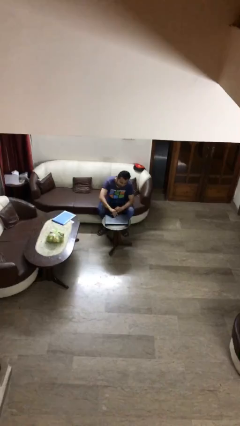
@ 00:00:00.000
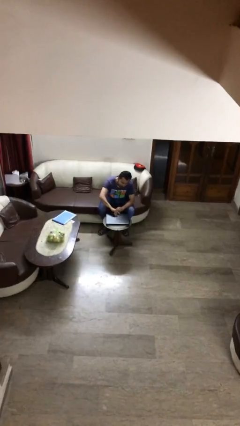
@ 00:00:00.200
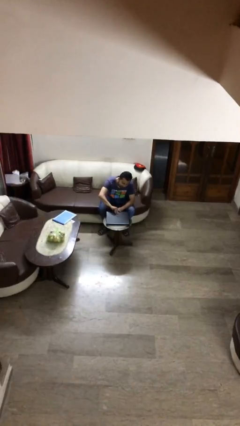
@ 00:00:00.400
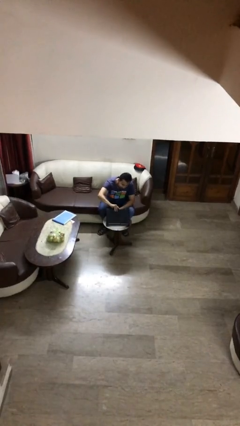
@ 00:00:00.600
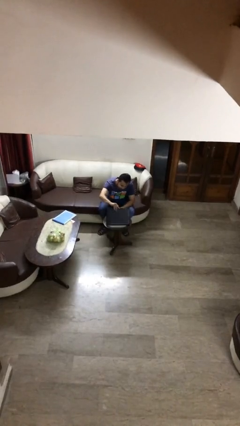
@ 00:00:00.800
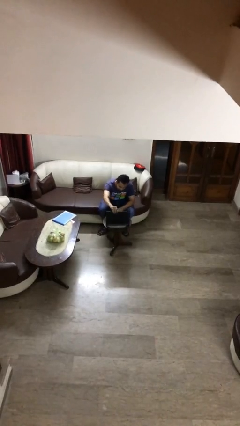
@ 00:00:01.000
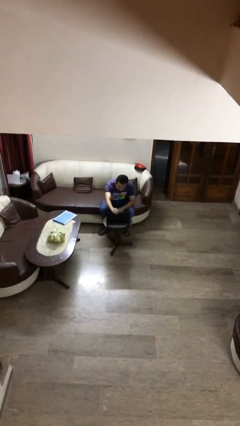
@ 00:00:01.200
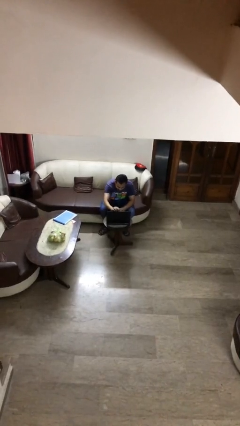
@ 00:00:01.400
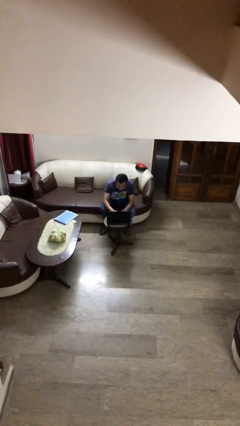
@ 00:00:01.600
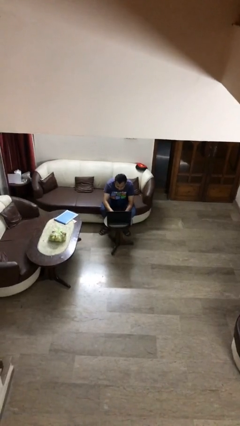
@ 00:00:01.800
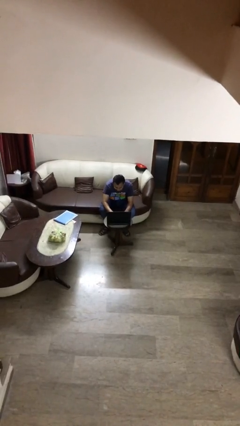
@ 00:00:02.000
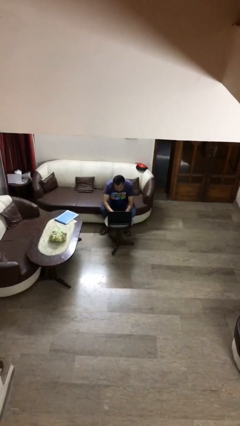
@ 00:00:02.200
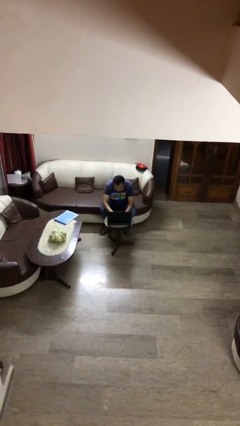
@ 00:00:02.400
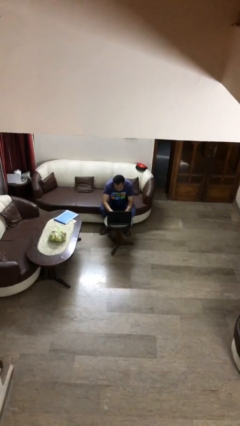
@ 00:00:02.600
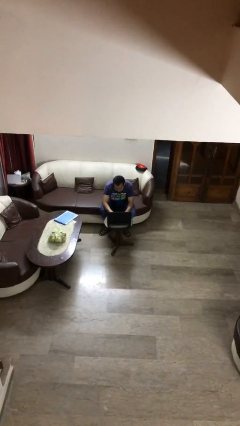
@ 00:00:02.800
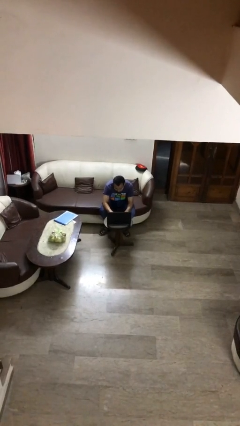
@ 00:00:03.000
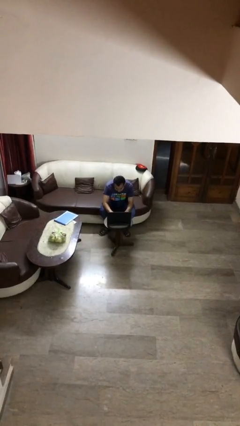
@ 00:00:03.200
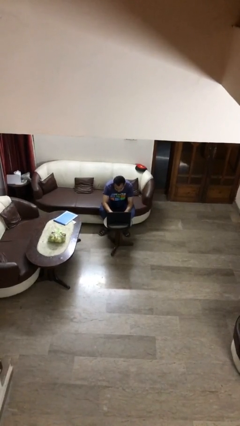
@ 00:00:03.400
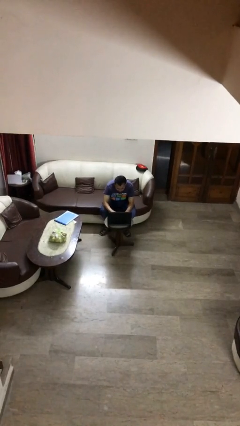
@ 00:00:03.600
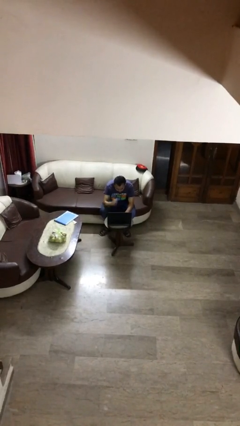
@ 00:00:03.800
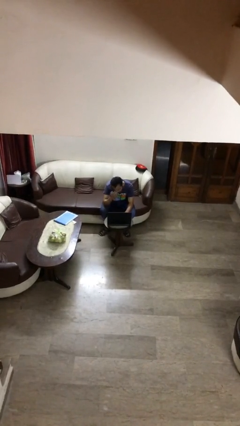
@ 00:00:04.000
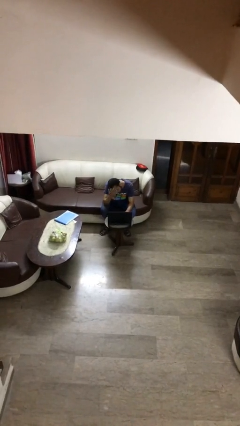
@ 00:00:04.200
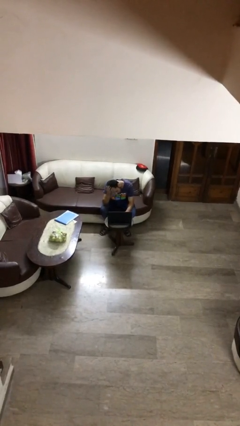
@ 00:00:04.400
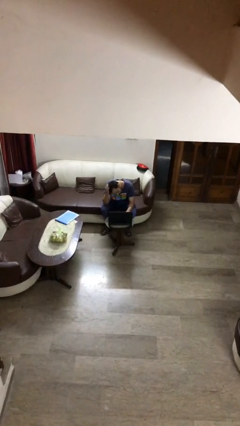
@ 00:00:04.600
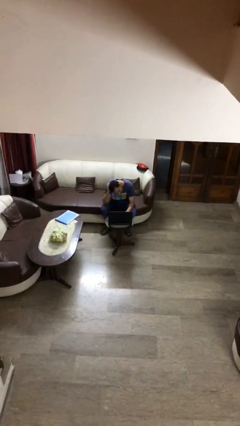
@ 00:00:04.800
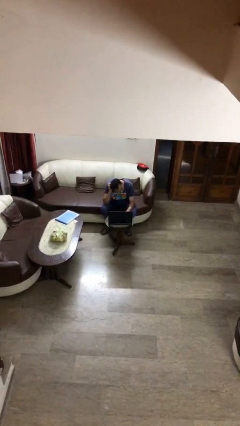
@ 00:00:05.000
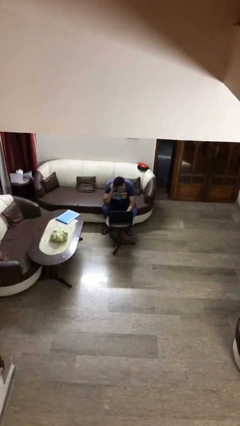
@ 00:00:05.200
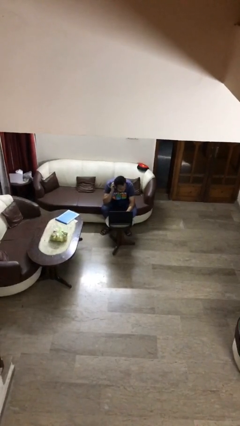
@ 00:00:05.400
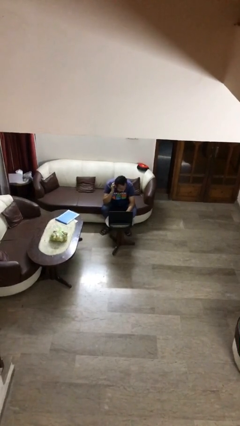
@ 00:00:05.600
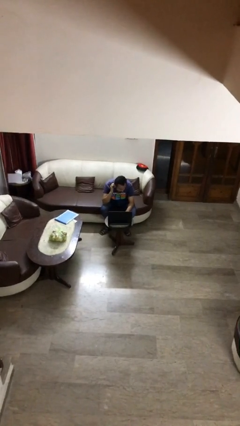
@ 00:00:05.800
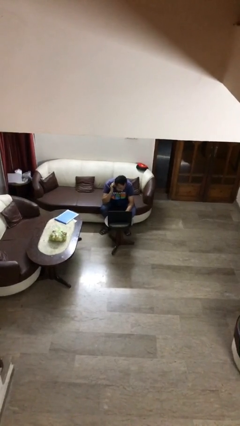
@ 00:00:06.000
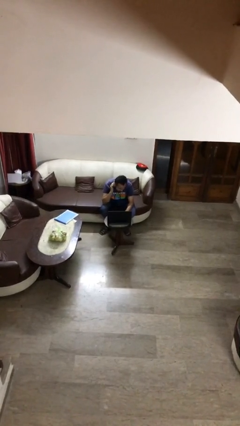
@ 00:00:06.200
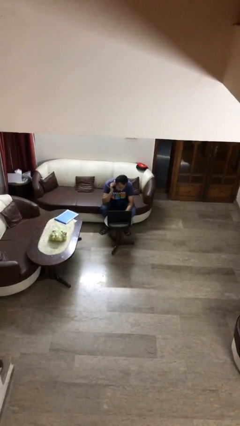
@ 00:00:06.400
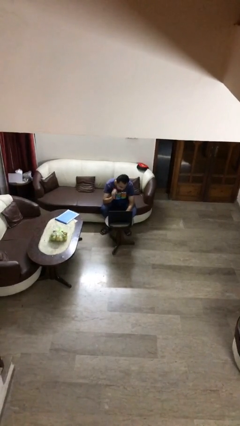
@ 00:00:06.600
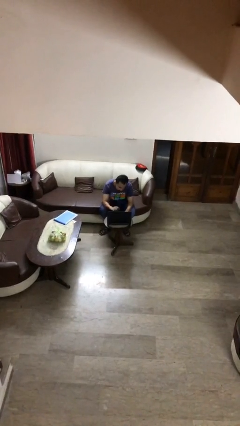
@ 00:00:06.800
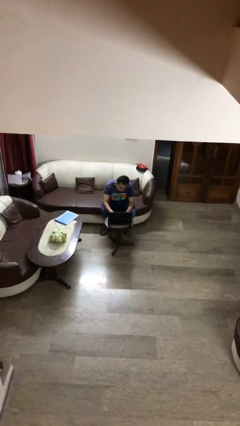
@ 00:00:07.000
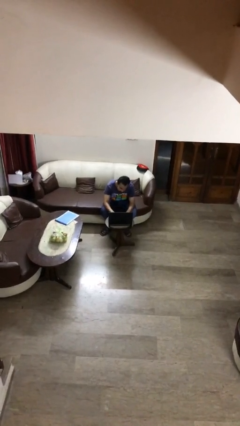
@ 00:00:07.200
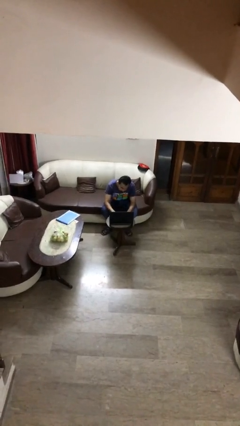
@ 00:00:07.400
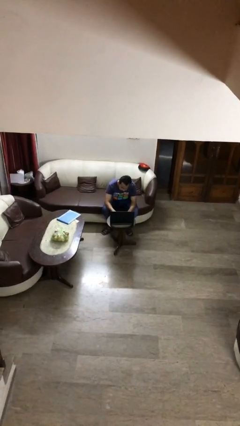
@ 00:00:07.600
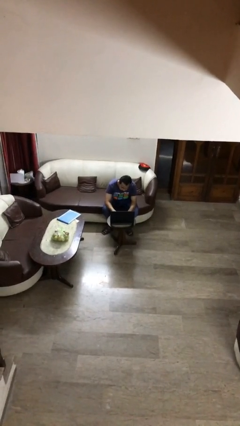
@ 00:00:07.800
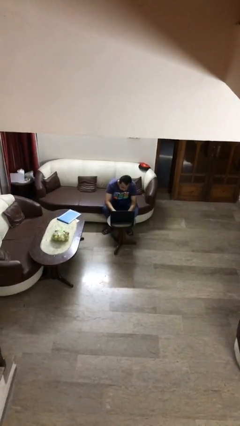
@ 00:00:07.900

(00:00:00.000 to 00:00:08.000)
person interacts with laptop

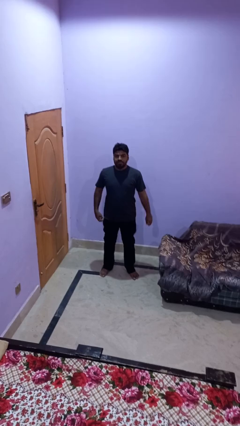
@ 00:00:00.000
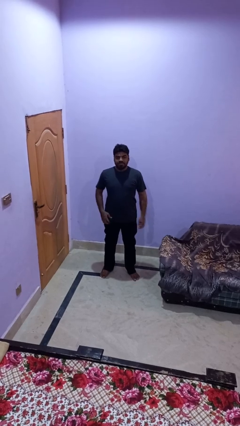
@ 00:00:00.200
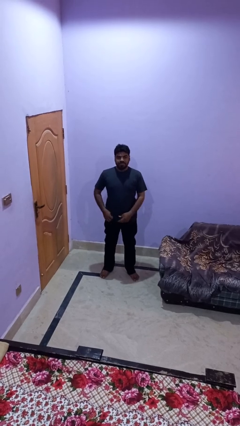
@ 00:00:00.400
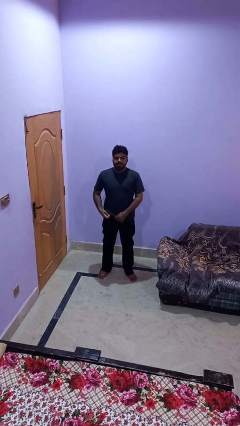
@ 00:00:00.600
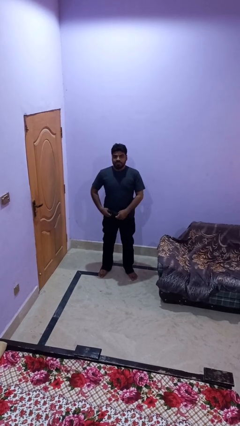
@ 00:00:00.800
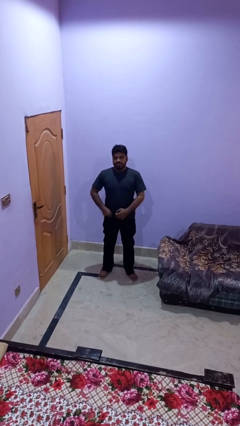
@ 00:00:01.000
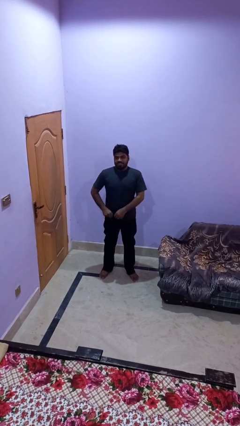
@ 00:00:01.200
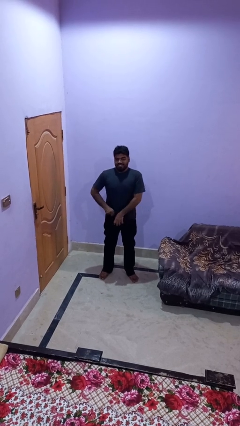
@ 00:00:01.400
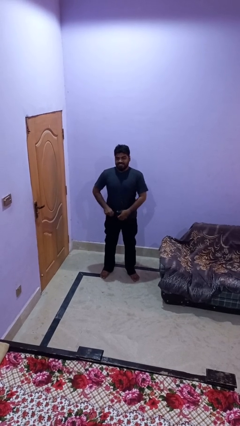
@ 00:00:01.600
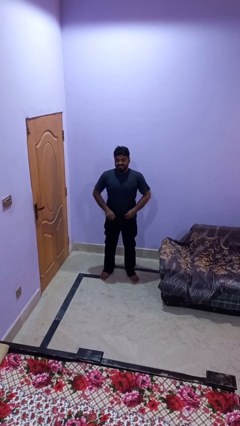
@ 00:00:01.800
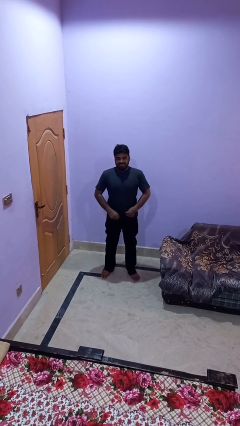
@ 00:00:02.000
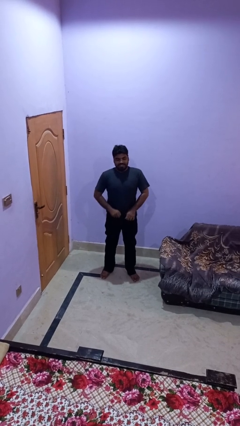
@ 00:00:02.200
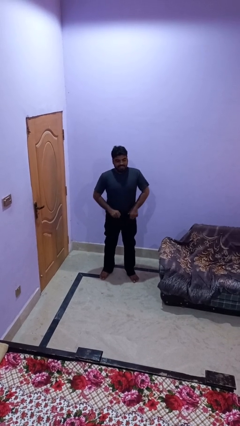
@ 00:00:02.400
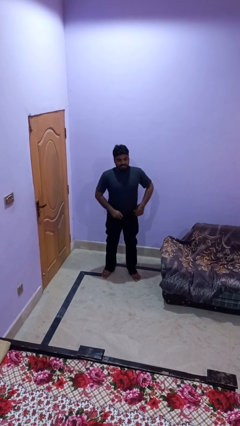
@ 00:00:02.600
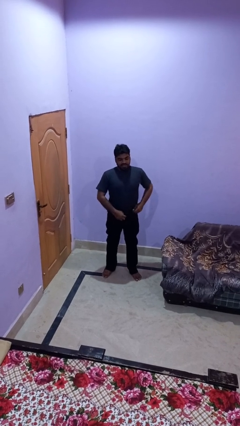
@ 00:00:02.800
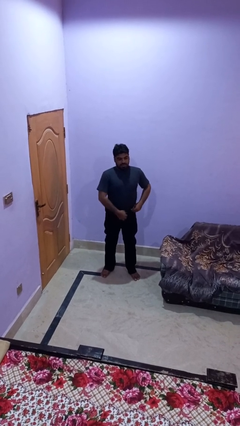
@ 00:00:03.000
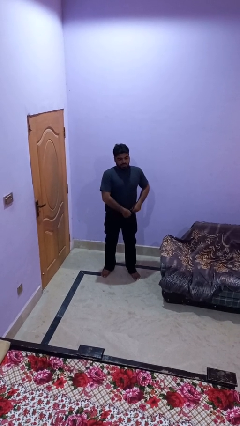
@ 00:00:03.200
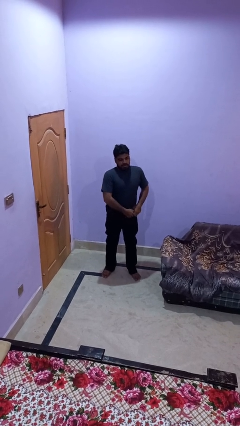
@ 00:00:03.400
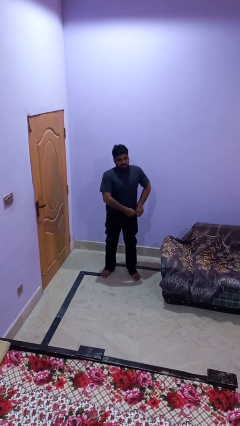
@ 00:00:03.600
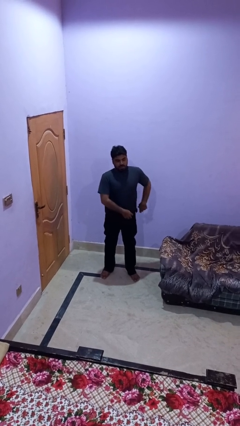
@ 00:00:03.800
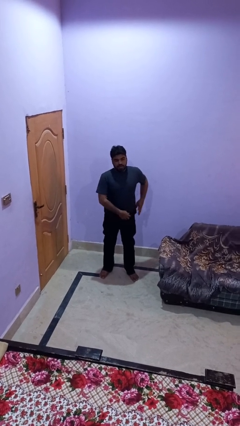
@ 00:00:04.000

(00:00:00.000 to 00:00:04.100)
person tucks in shirt

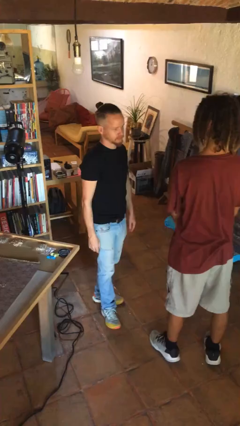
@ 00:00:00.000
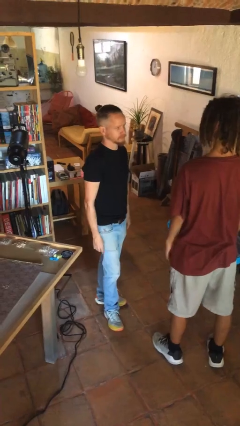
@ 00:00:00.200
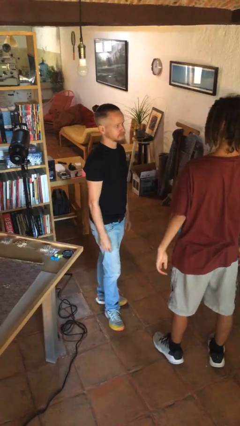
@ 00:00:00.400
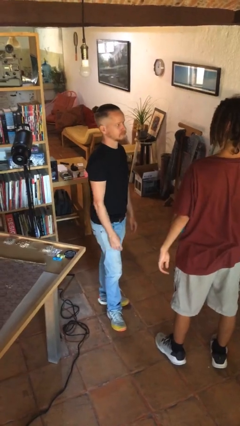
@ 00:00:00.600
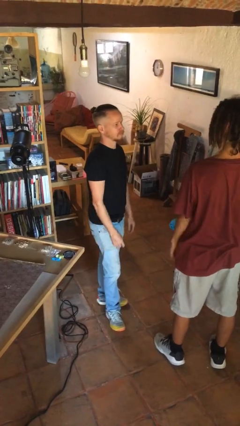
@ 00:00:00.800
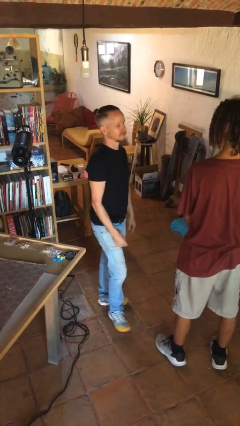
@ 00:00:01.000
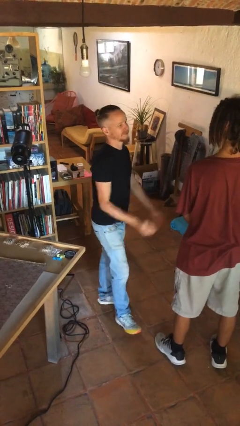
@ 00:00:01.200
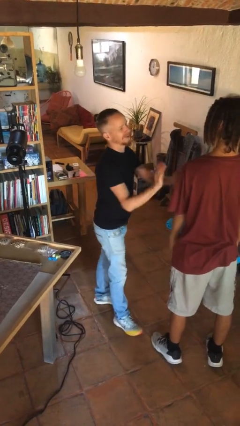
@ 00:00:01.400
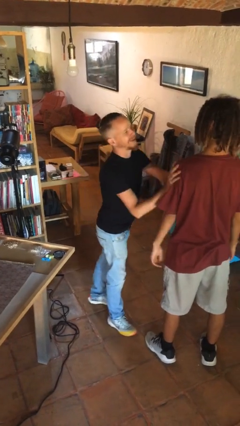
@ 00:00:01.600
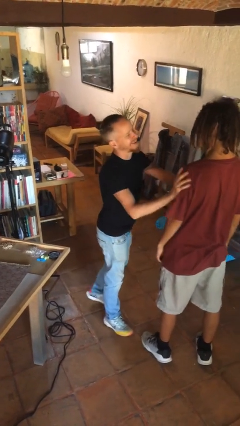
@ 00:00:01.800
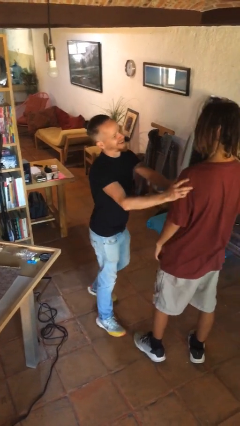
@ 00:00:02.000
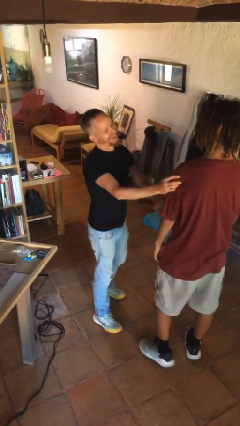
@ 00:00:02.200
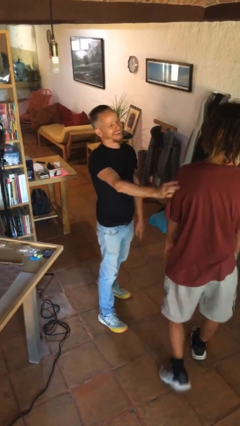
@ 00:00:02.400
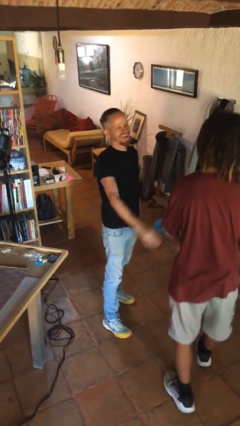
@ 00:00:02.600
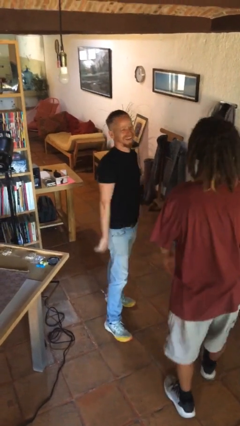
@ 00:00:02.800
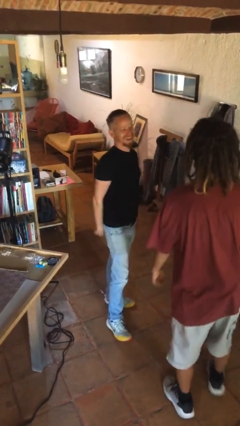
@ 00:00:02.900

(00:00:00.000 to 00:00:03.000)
person shoves person

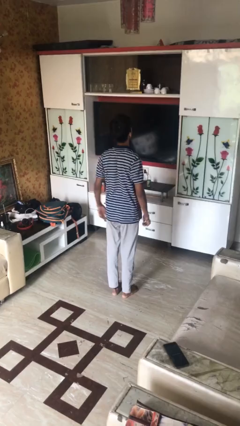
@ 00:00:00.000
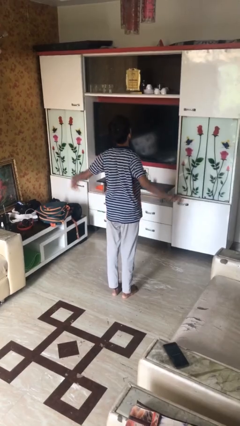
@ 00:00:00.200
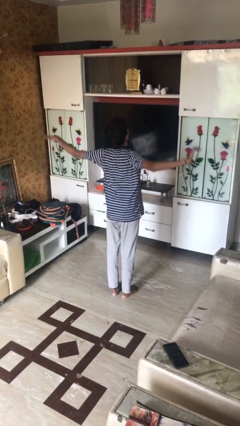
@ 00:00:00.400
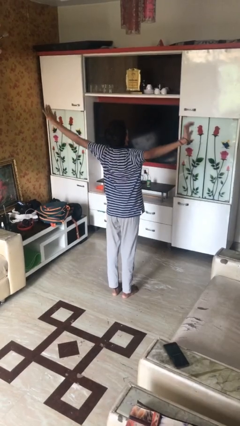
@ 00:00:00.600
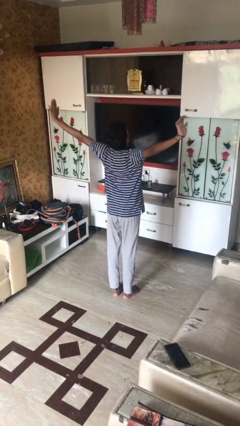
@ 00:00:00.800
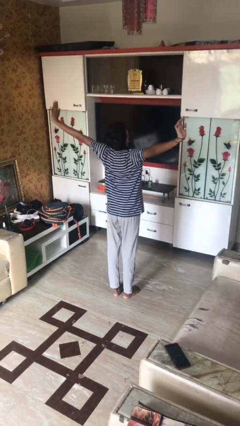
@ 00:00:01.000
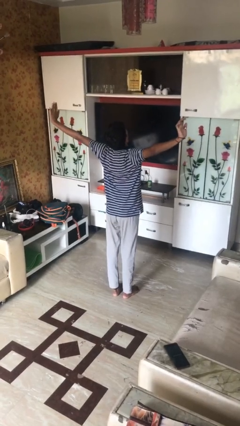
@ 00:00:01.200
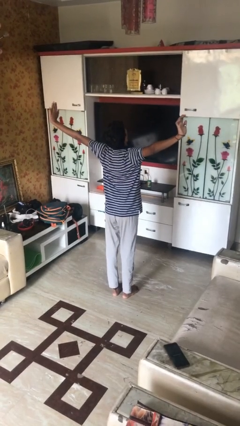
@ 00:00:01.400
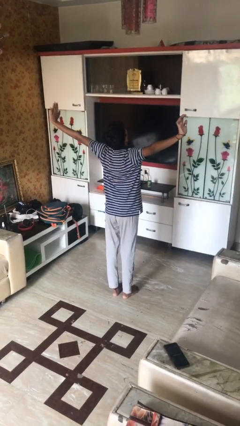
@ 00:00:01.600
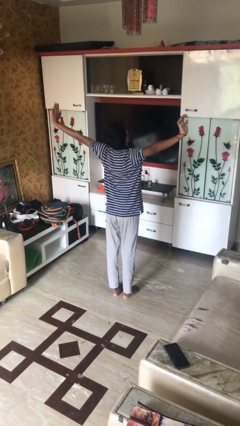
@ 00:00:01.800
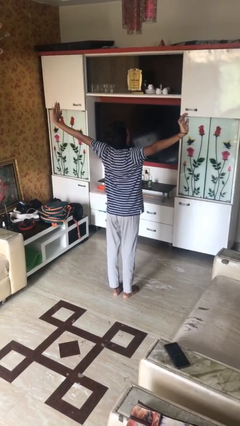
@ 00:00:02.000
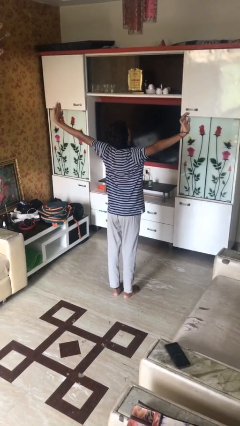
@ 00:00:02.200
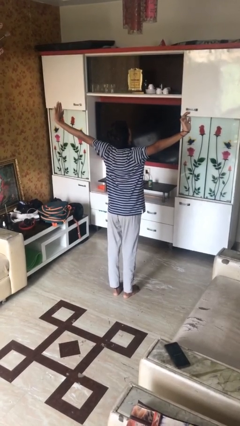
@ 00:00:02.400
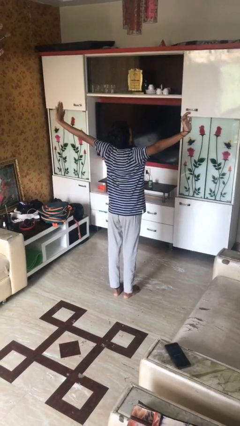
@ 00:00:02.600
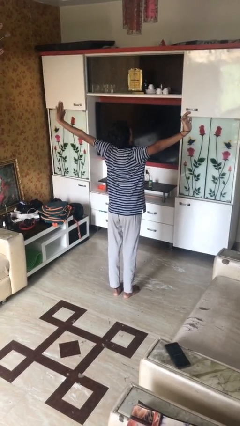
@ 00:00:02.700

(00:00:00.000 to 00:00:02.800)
person stretches arms to side
